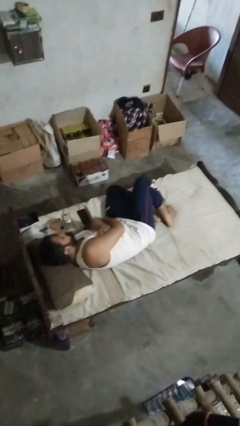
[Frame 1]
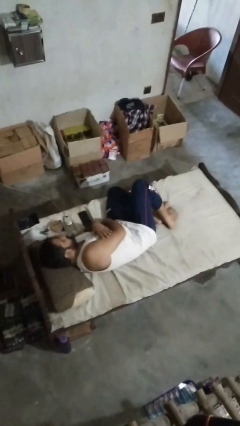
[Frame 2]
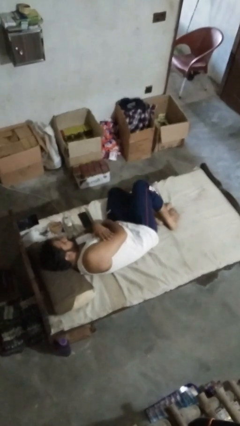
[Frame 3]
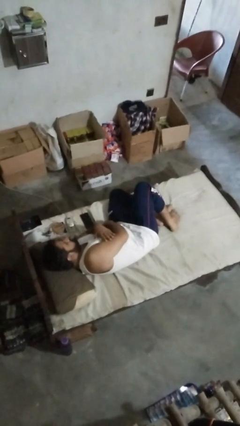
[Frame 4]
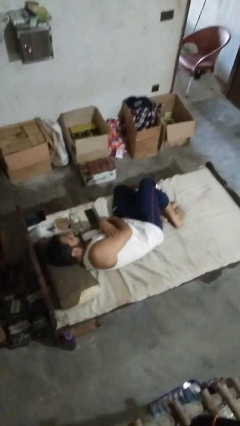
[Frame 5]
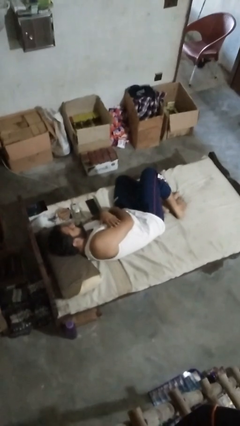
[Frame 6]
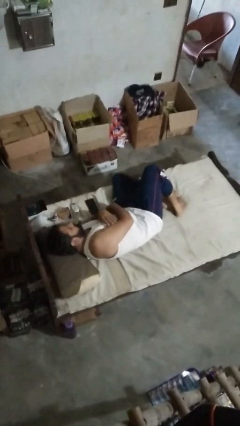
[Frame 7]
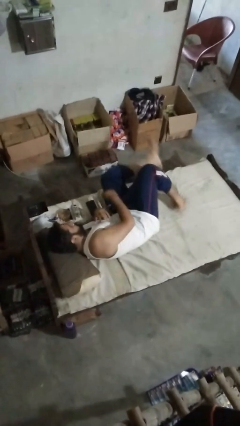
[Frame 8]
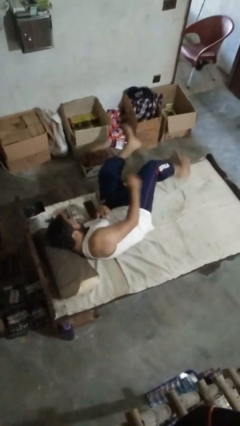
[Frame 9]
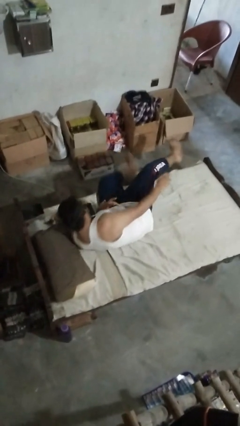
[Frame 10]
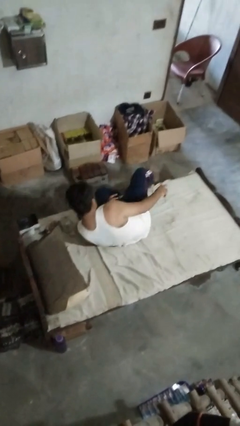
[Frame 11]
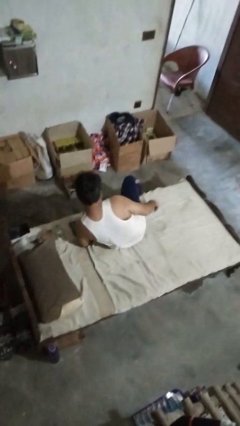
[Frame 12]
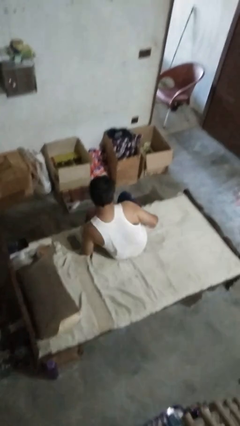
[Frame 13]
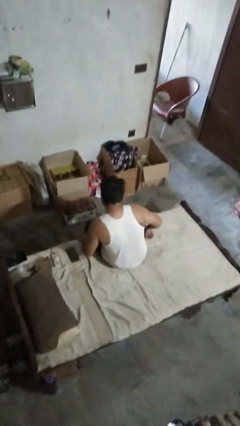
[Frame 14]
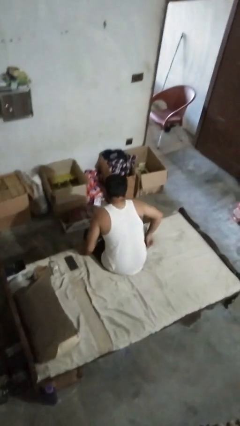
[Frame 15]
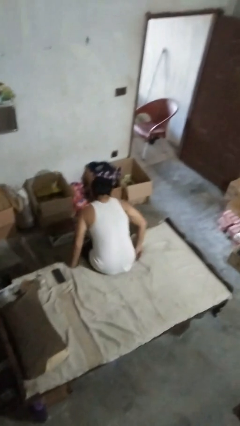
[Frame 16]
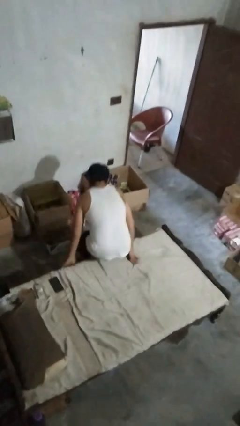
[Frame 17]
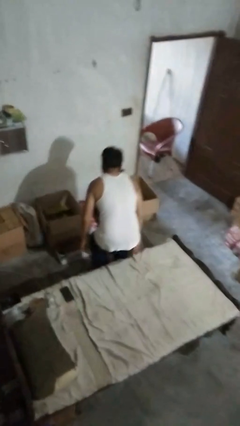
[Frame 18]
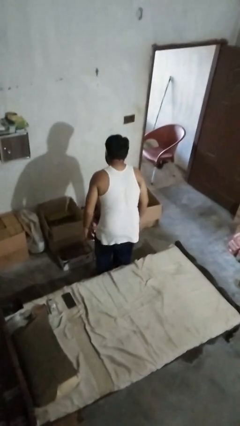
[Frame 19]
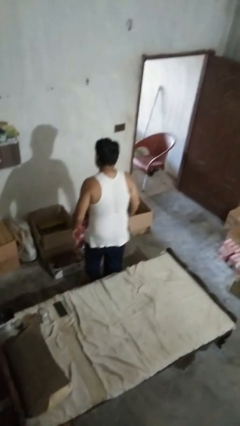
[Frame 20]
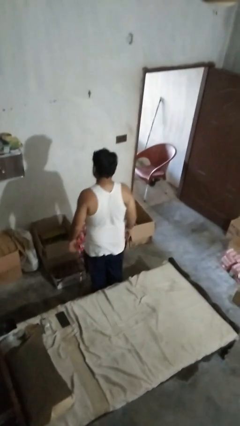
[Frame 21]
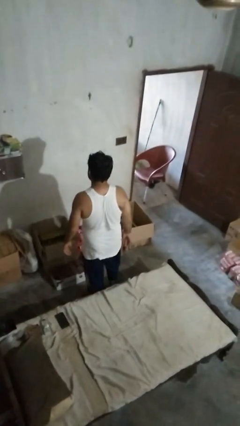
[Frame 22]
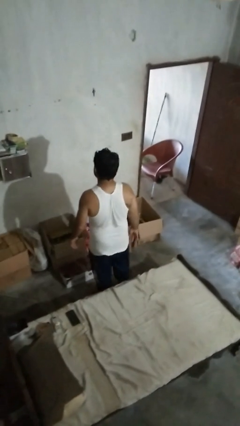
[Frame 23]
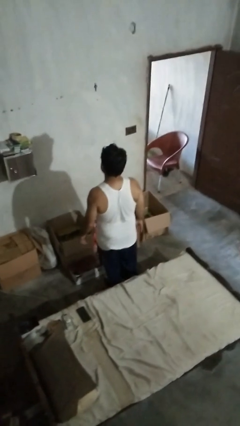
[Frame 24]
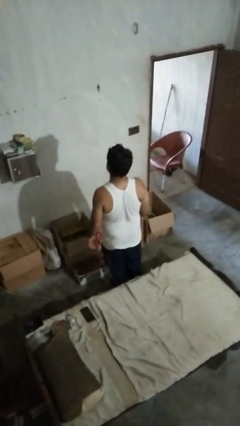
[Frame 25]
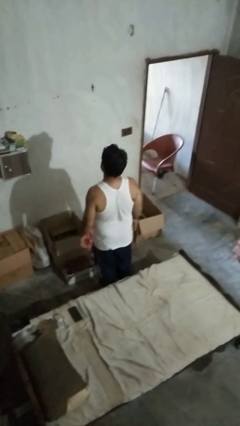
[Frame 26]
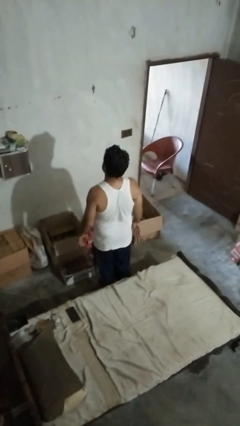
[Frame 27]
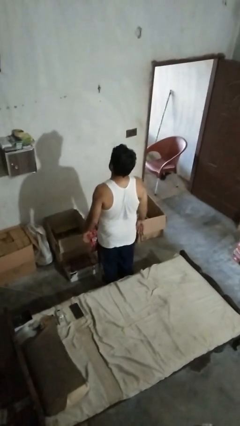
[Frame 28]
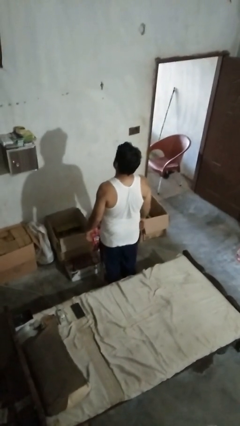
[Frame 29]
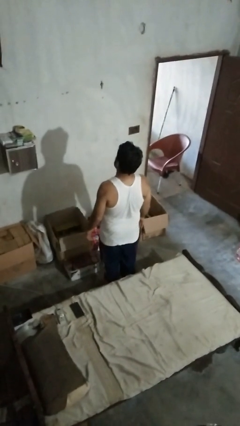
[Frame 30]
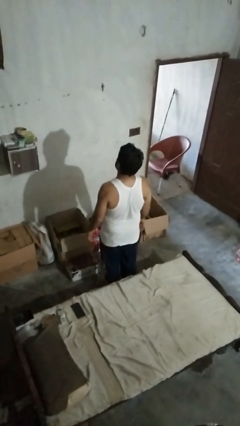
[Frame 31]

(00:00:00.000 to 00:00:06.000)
person stands up

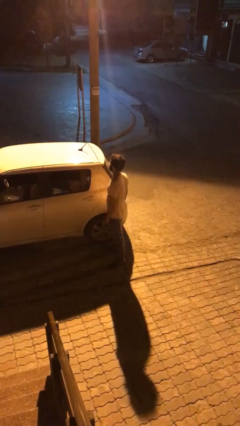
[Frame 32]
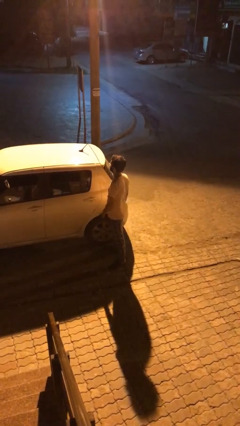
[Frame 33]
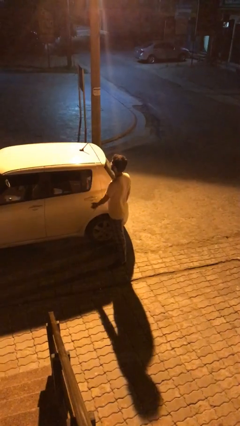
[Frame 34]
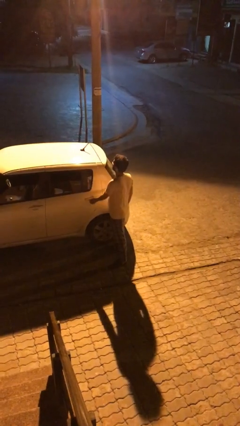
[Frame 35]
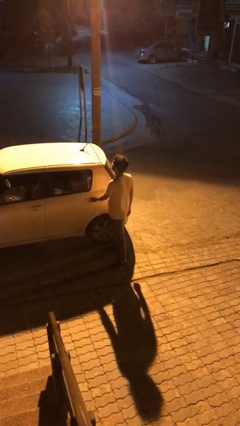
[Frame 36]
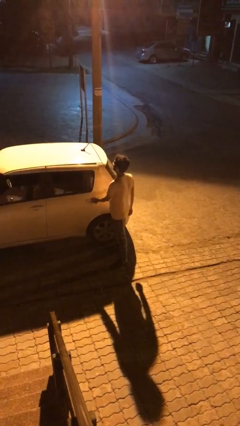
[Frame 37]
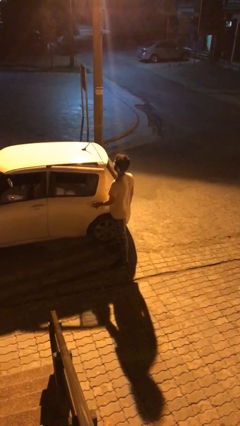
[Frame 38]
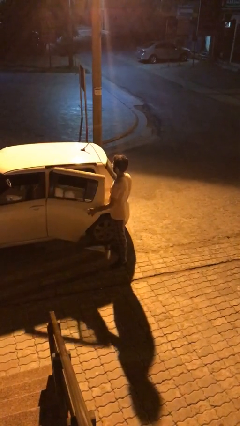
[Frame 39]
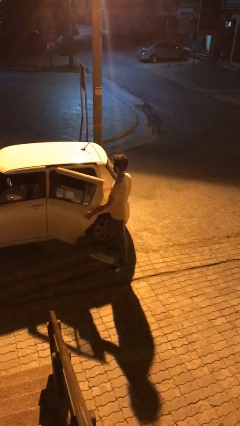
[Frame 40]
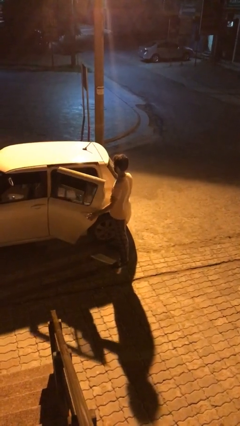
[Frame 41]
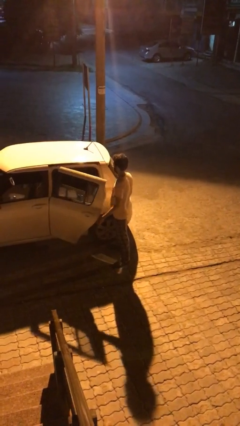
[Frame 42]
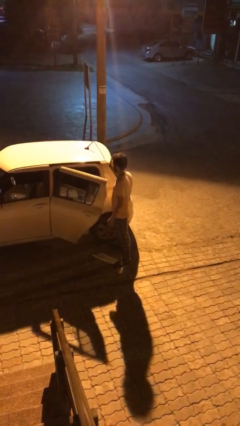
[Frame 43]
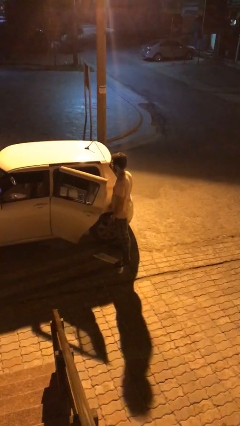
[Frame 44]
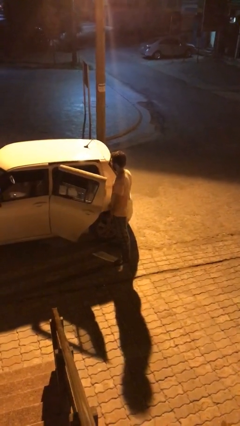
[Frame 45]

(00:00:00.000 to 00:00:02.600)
person opens car door

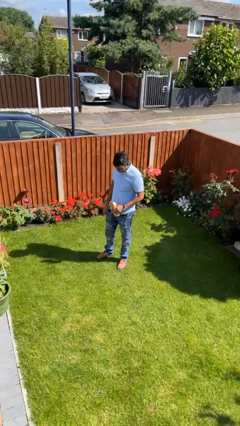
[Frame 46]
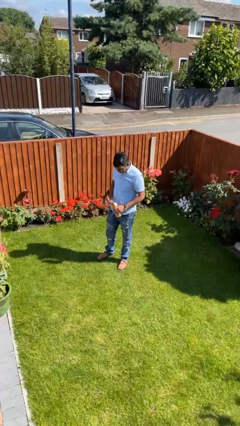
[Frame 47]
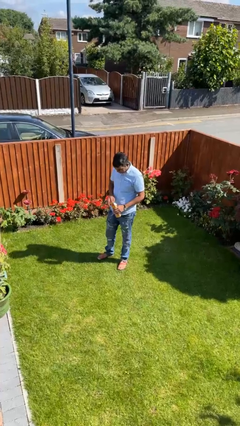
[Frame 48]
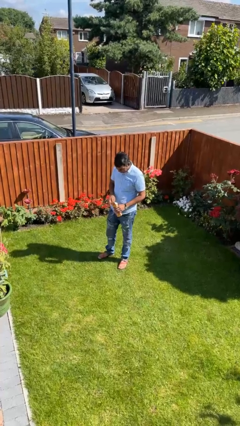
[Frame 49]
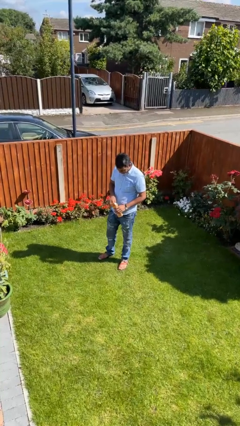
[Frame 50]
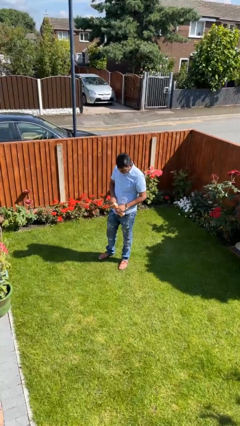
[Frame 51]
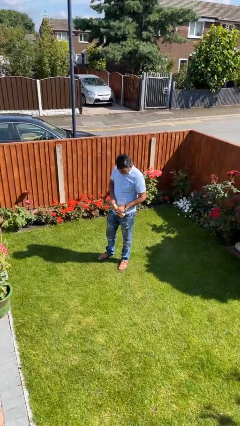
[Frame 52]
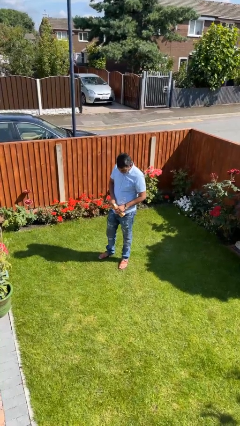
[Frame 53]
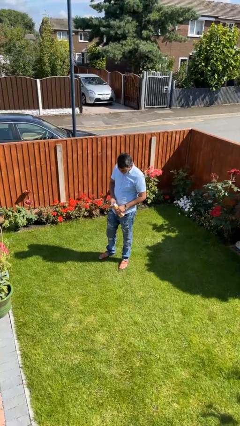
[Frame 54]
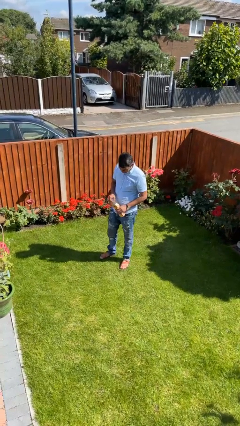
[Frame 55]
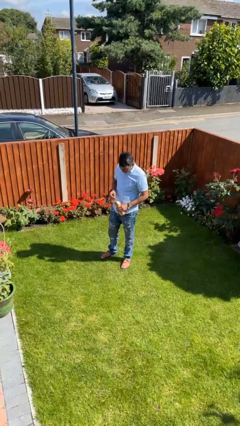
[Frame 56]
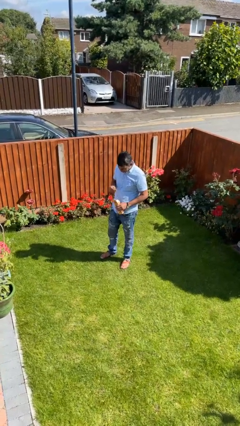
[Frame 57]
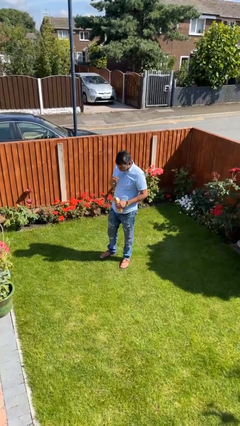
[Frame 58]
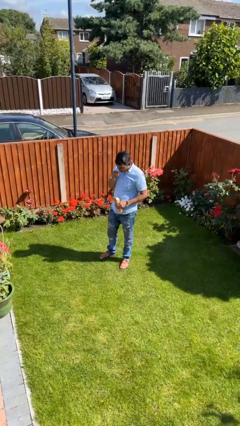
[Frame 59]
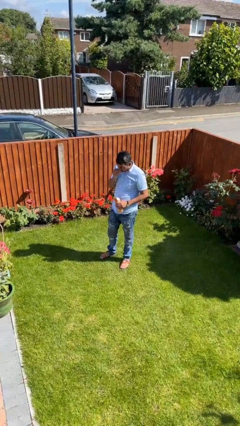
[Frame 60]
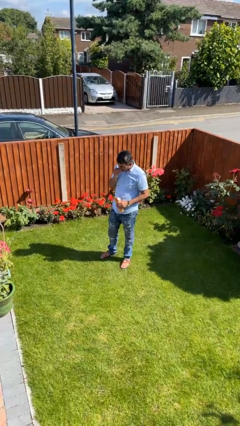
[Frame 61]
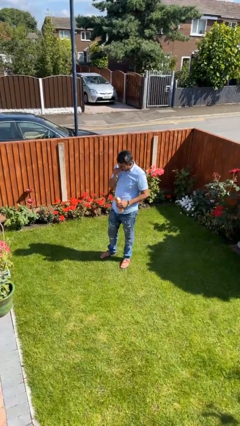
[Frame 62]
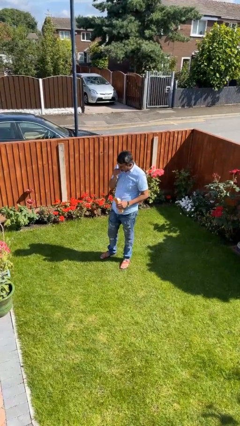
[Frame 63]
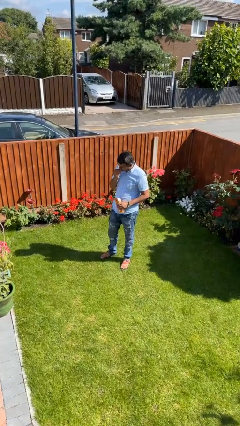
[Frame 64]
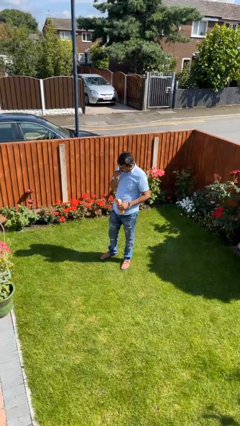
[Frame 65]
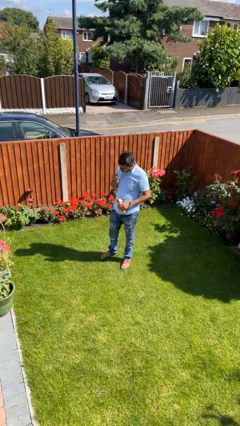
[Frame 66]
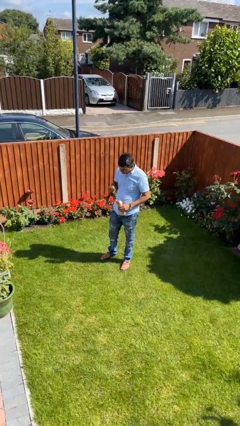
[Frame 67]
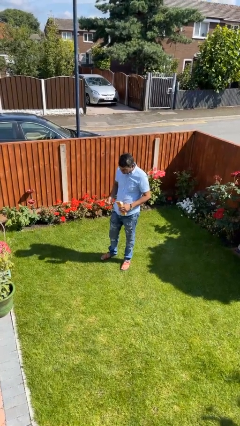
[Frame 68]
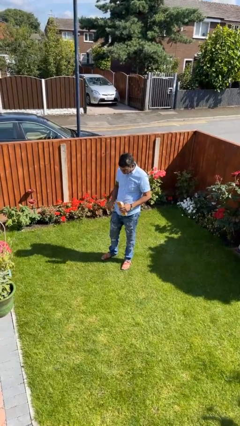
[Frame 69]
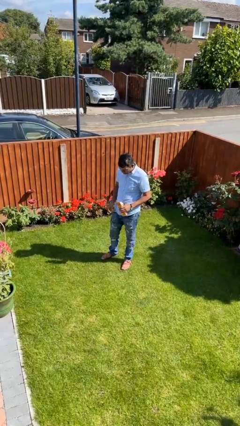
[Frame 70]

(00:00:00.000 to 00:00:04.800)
person eats snack from bag

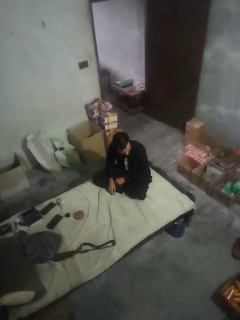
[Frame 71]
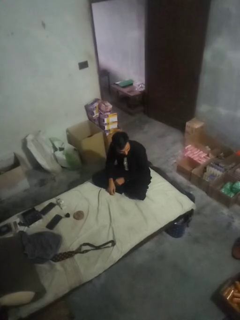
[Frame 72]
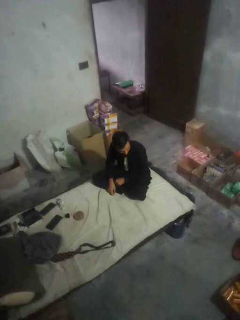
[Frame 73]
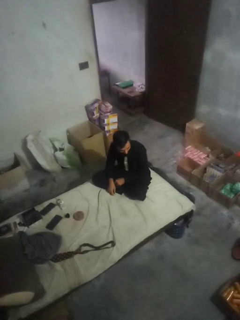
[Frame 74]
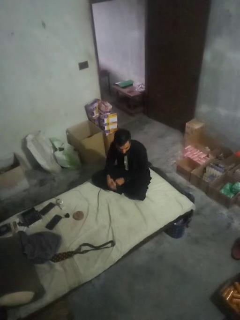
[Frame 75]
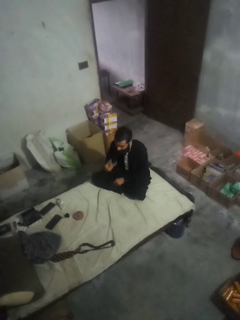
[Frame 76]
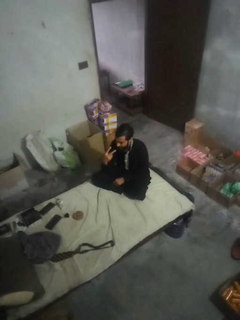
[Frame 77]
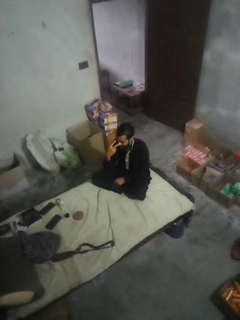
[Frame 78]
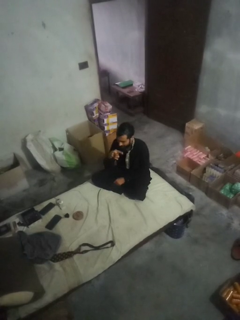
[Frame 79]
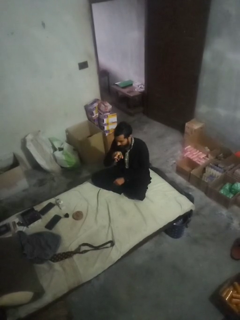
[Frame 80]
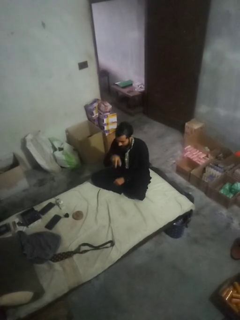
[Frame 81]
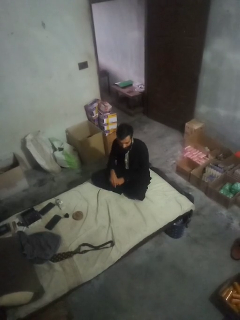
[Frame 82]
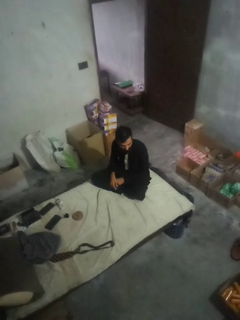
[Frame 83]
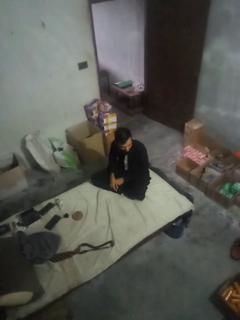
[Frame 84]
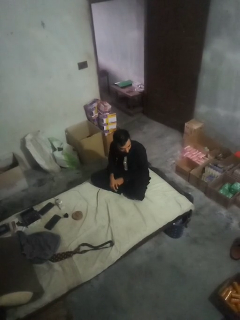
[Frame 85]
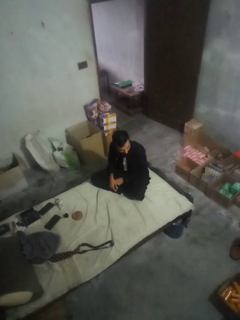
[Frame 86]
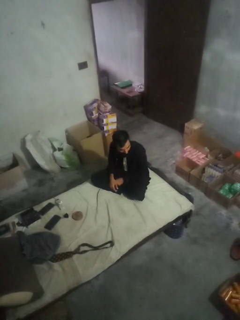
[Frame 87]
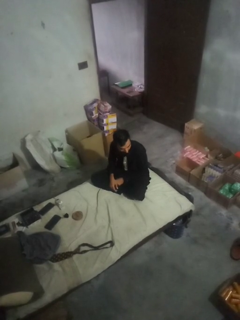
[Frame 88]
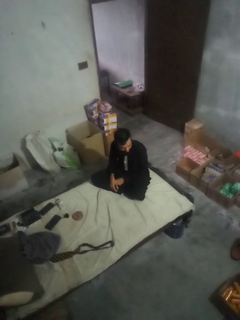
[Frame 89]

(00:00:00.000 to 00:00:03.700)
person gestures watch closely

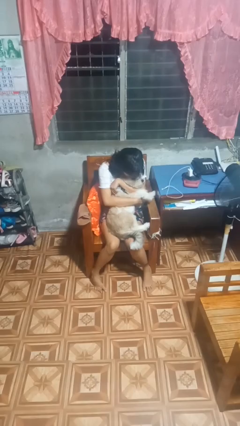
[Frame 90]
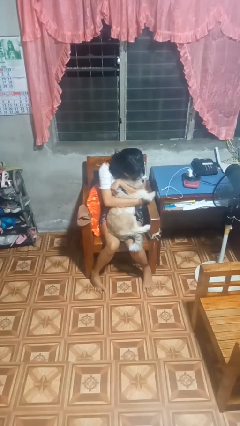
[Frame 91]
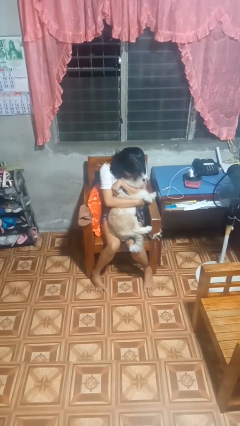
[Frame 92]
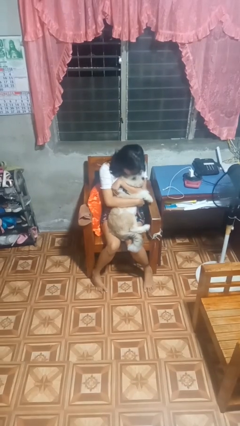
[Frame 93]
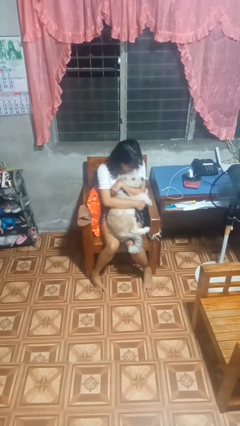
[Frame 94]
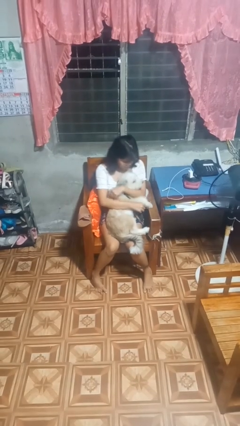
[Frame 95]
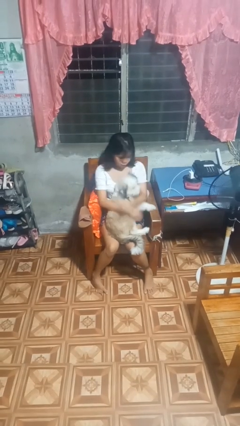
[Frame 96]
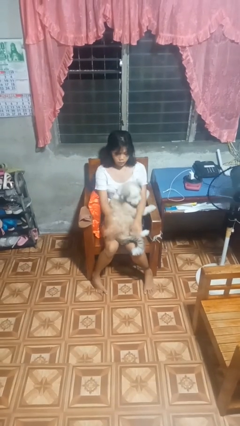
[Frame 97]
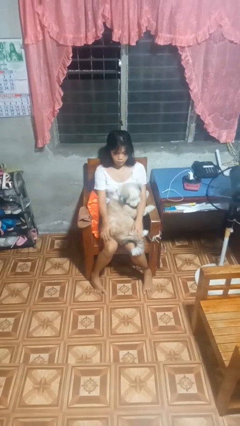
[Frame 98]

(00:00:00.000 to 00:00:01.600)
person hugs dog
